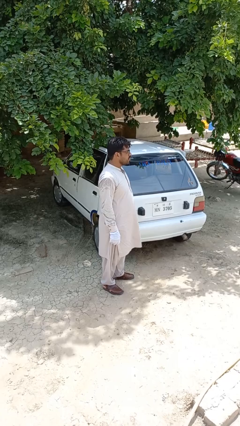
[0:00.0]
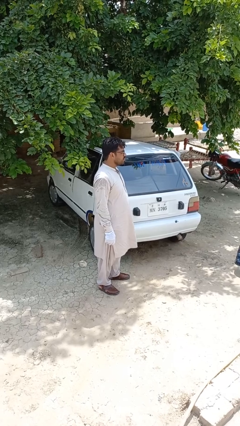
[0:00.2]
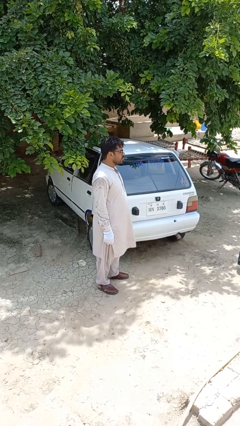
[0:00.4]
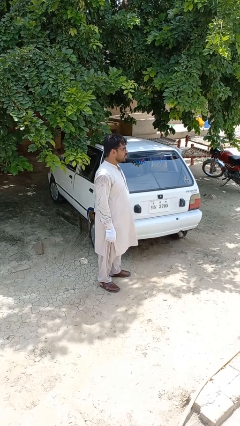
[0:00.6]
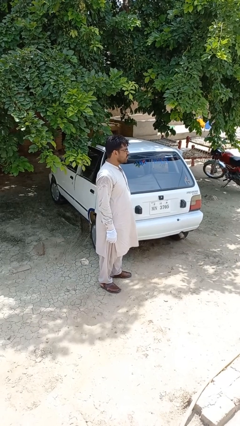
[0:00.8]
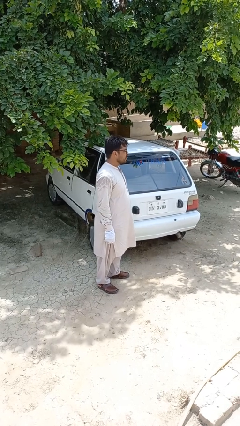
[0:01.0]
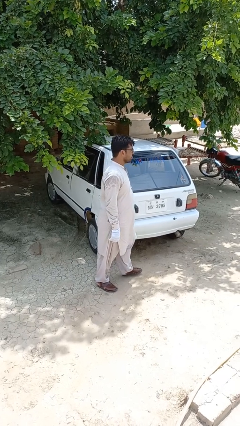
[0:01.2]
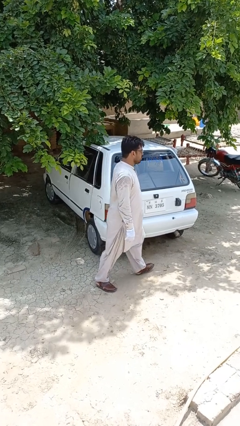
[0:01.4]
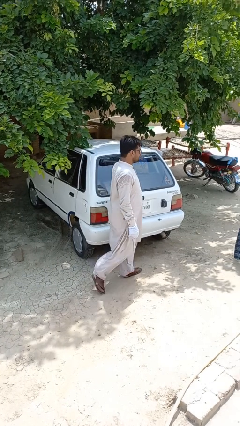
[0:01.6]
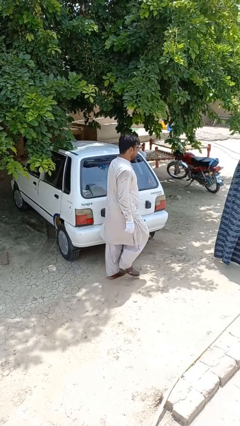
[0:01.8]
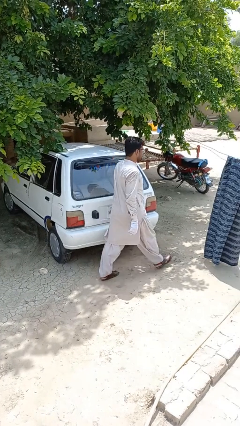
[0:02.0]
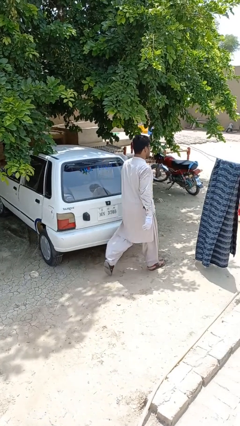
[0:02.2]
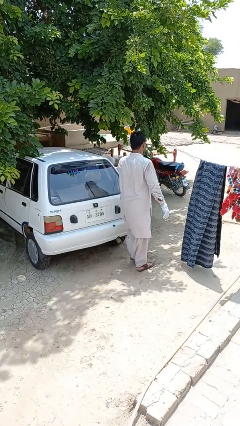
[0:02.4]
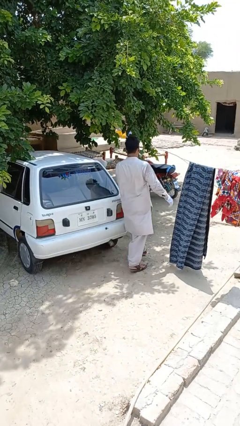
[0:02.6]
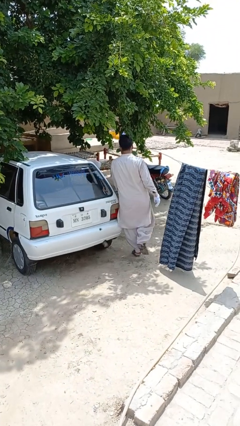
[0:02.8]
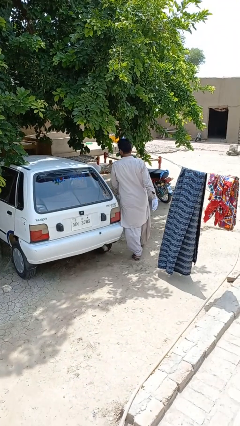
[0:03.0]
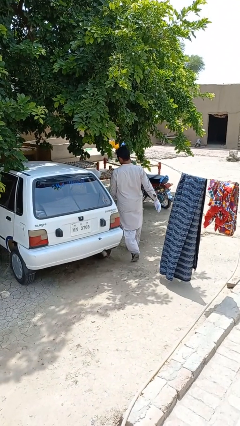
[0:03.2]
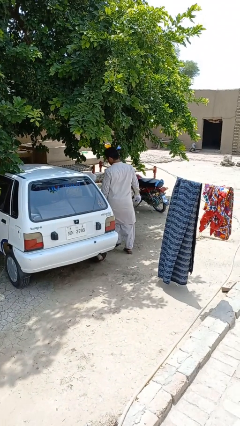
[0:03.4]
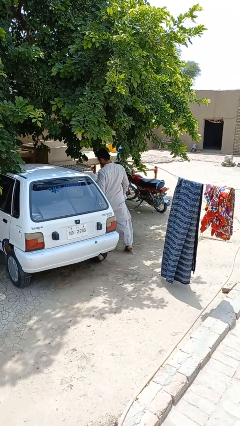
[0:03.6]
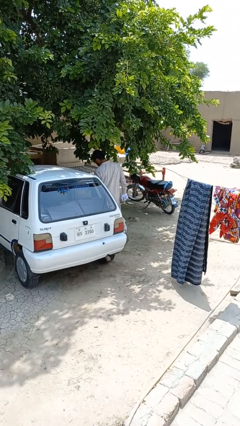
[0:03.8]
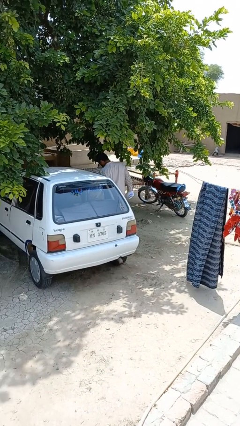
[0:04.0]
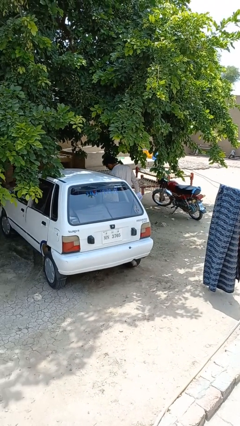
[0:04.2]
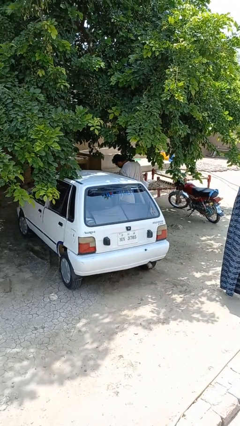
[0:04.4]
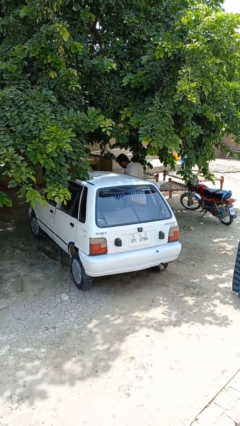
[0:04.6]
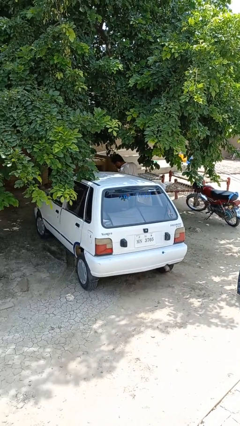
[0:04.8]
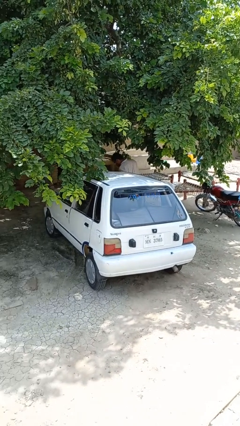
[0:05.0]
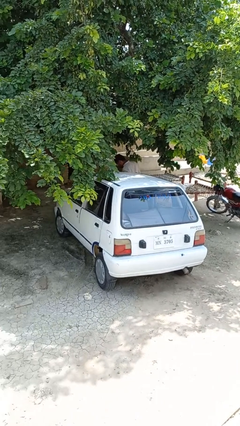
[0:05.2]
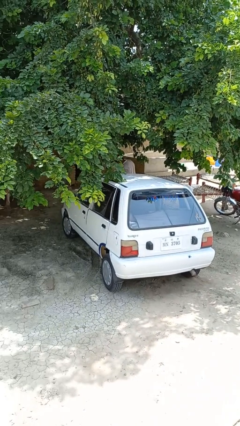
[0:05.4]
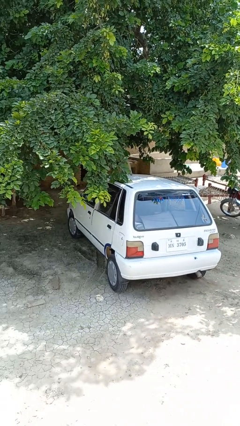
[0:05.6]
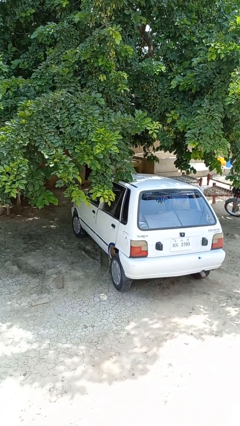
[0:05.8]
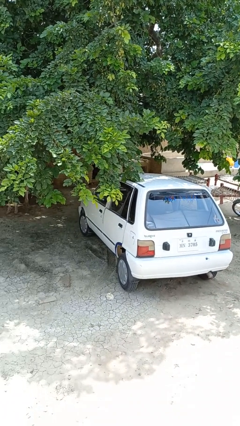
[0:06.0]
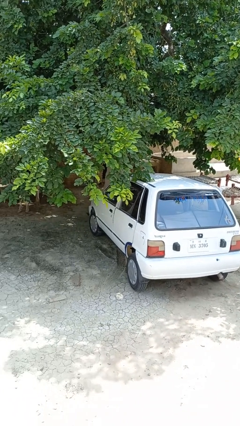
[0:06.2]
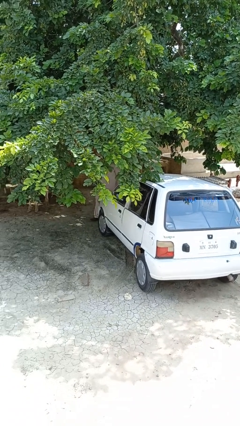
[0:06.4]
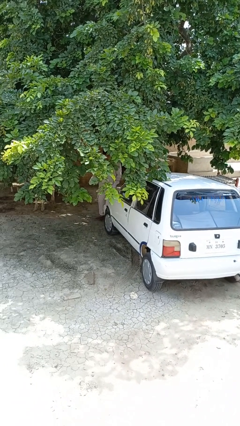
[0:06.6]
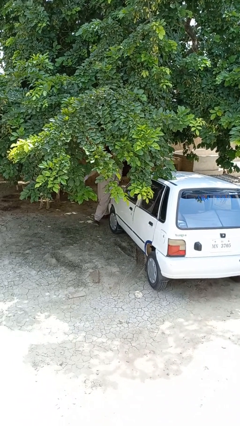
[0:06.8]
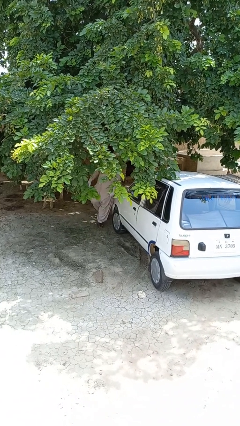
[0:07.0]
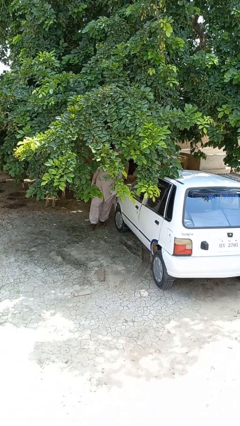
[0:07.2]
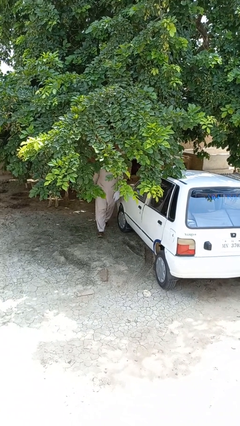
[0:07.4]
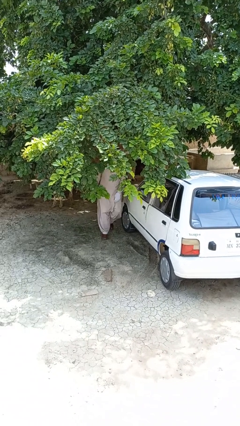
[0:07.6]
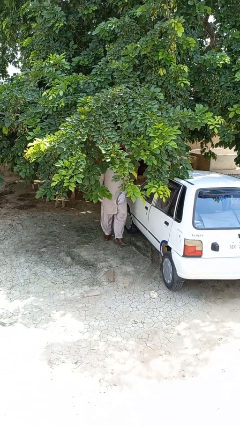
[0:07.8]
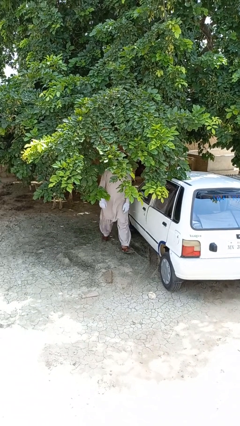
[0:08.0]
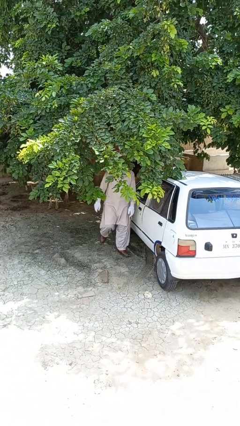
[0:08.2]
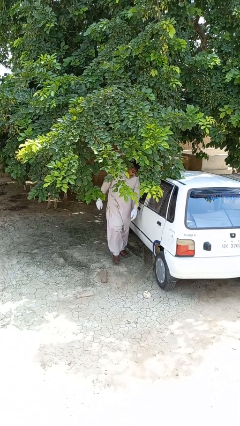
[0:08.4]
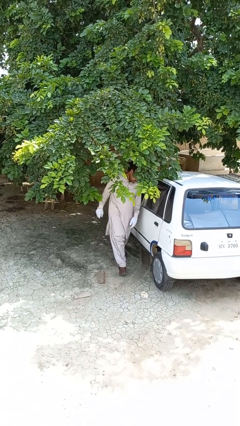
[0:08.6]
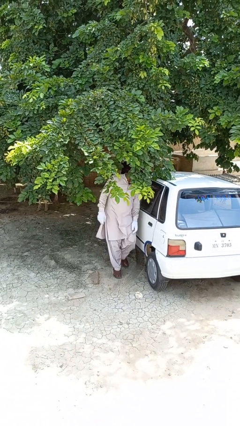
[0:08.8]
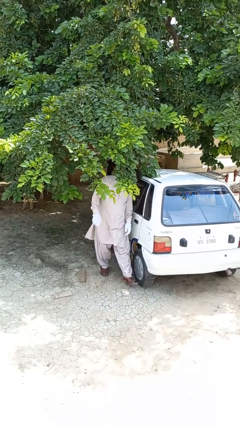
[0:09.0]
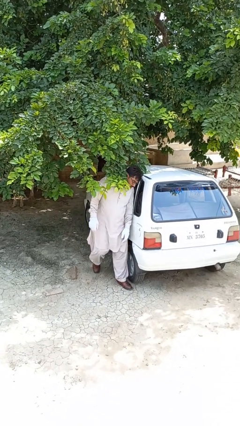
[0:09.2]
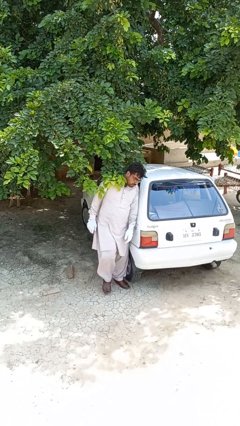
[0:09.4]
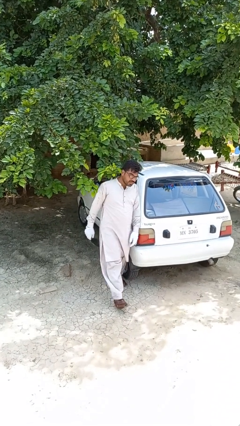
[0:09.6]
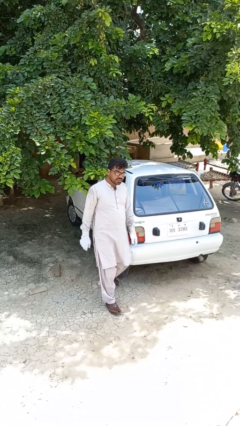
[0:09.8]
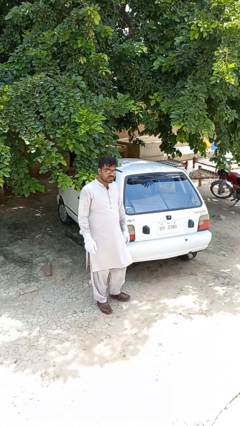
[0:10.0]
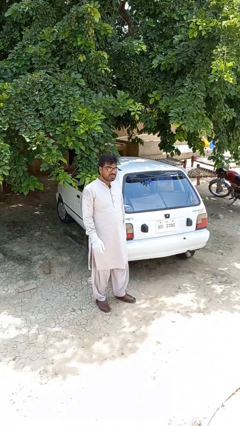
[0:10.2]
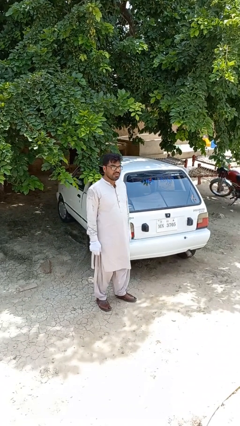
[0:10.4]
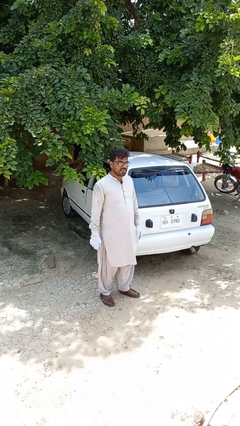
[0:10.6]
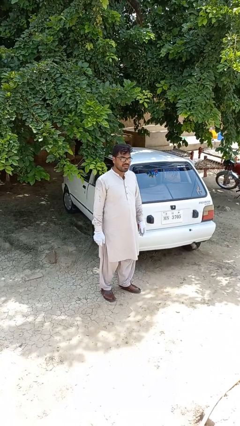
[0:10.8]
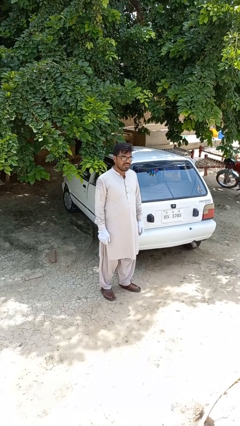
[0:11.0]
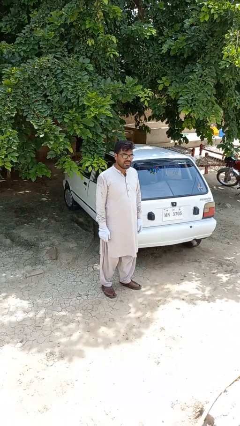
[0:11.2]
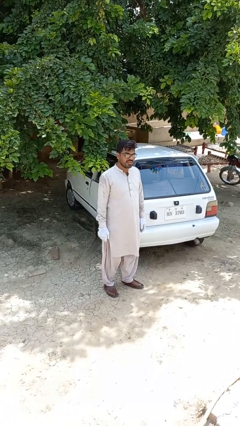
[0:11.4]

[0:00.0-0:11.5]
person walks around car

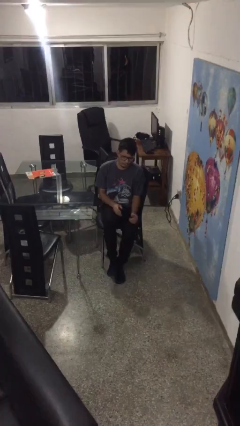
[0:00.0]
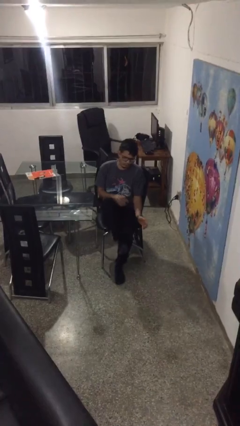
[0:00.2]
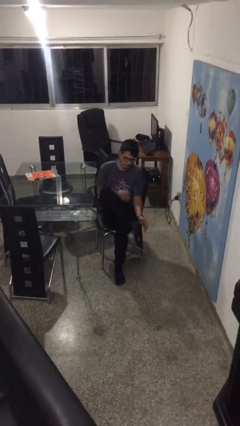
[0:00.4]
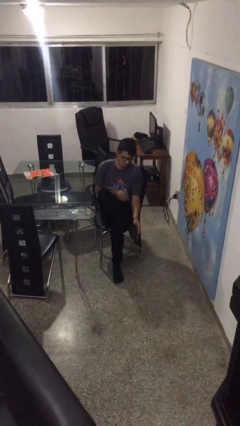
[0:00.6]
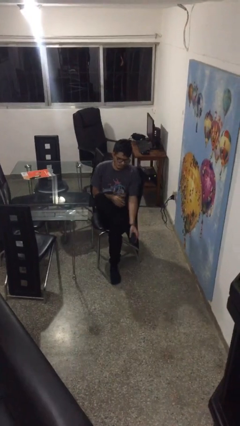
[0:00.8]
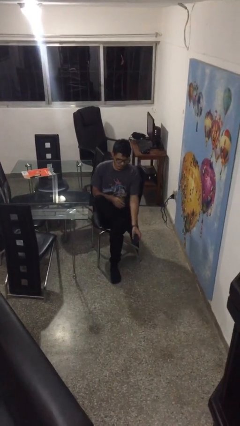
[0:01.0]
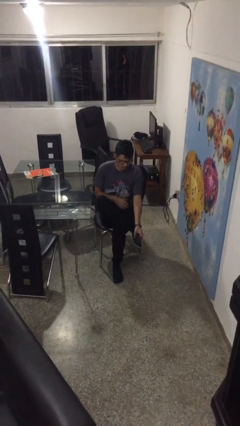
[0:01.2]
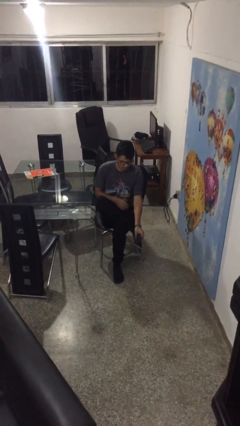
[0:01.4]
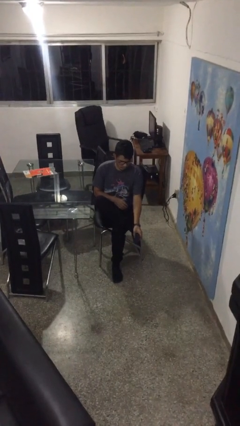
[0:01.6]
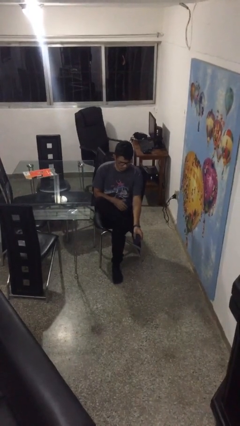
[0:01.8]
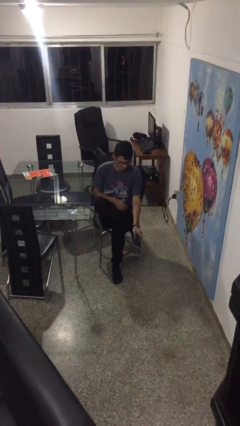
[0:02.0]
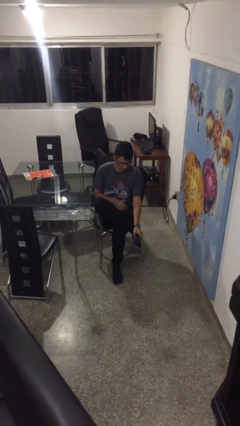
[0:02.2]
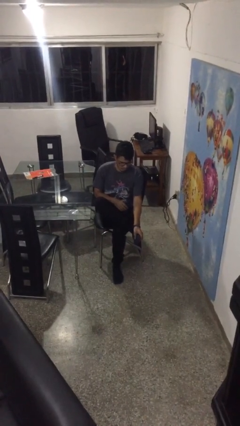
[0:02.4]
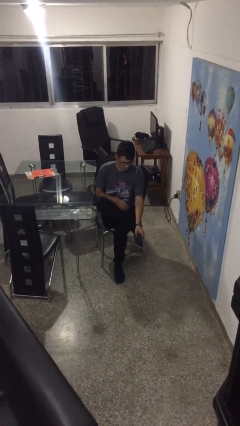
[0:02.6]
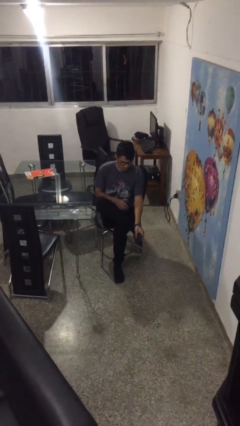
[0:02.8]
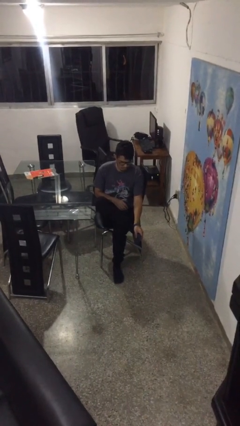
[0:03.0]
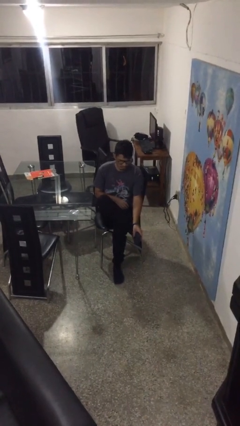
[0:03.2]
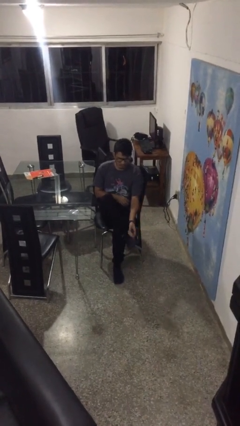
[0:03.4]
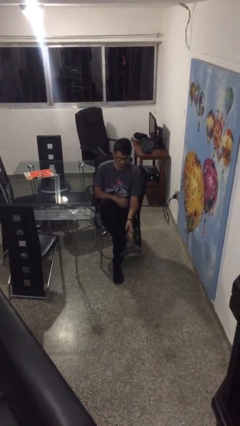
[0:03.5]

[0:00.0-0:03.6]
person rubs foot

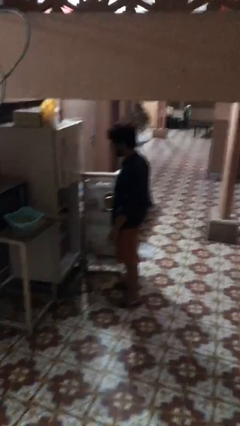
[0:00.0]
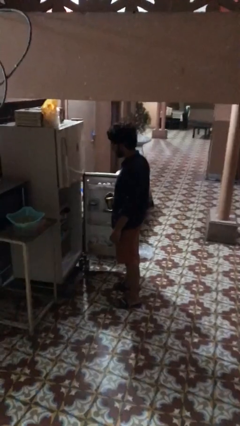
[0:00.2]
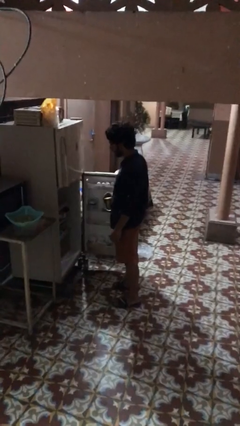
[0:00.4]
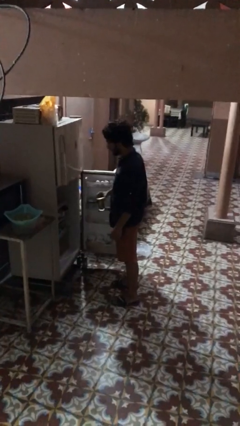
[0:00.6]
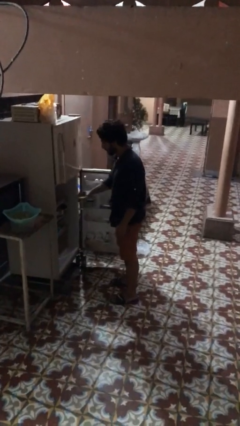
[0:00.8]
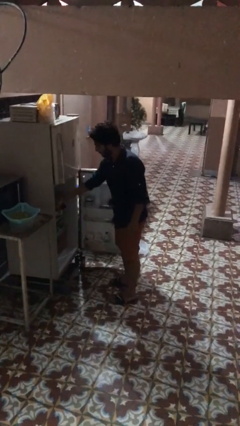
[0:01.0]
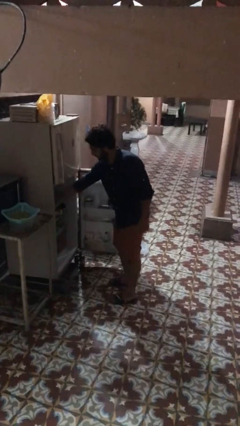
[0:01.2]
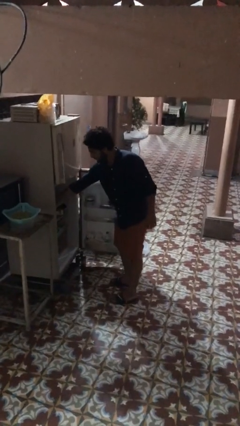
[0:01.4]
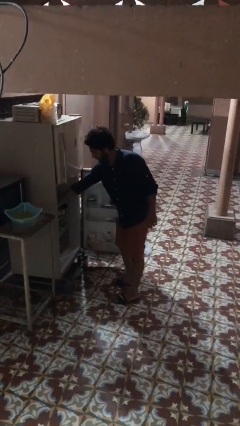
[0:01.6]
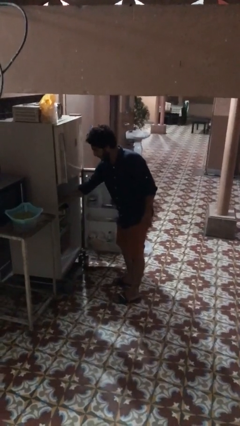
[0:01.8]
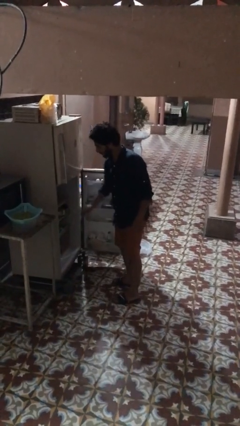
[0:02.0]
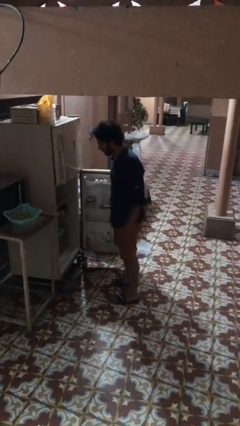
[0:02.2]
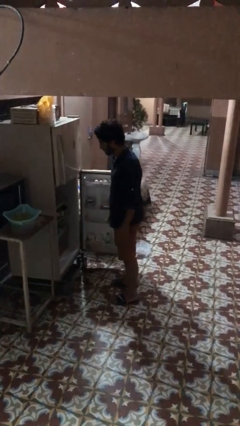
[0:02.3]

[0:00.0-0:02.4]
person puts object into refrigerator

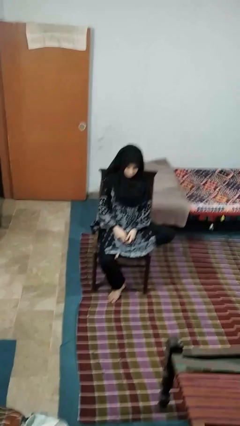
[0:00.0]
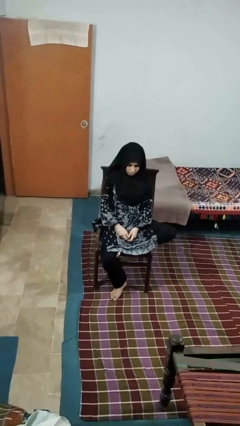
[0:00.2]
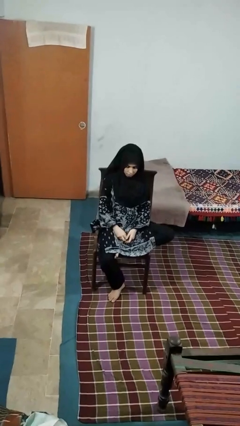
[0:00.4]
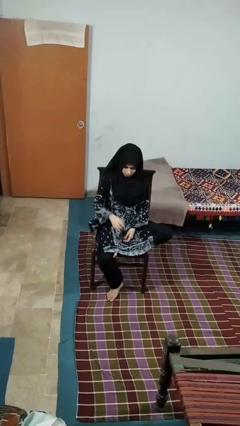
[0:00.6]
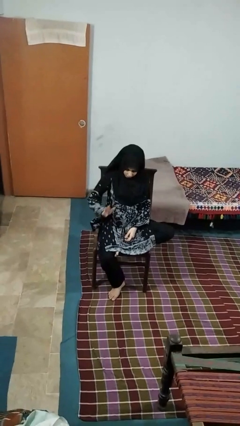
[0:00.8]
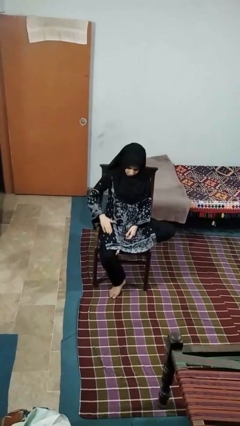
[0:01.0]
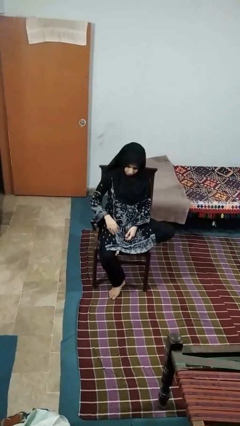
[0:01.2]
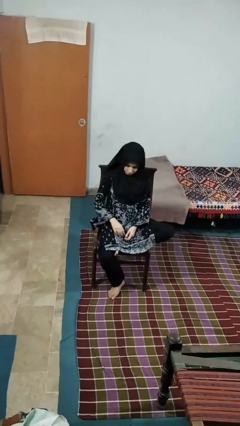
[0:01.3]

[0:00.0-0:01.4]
person swats bug
